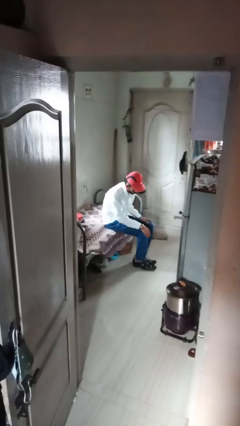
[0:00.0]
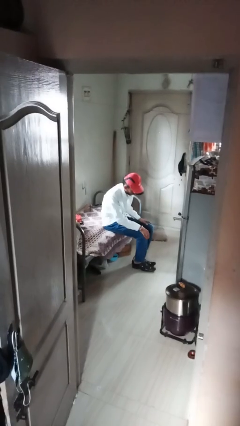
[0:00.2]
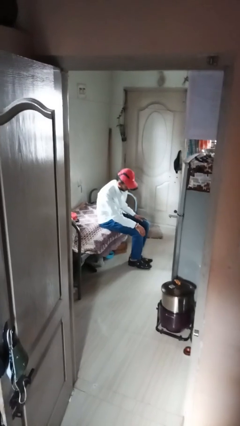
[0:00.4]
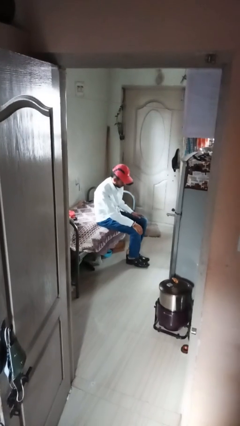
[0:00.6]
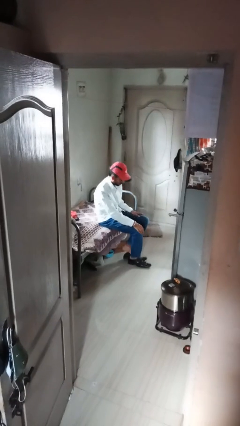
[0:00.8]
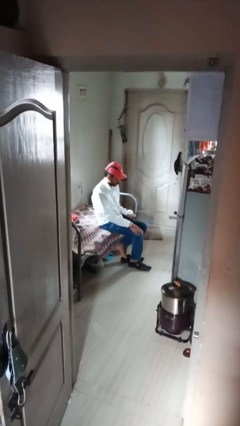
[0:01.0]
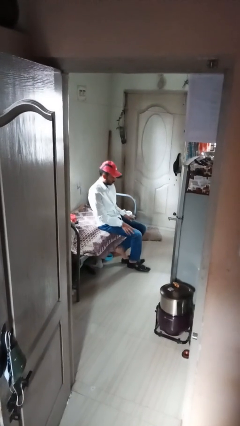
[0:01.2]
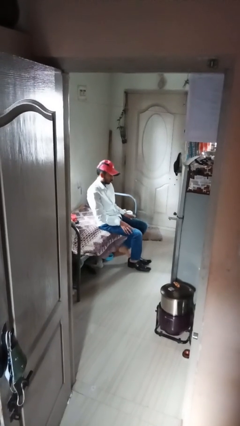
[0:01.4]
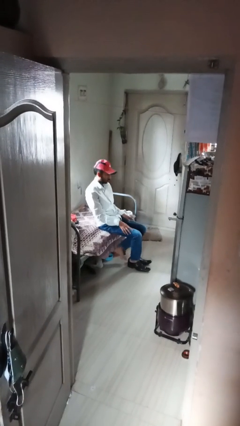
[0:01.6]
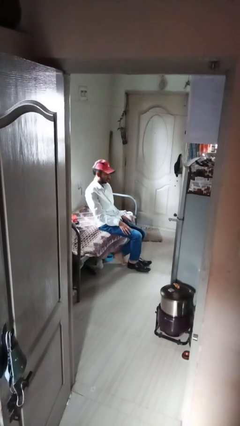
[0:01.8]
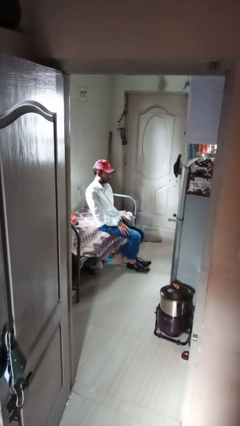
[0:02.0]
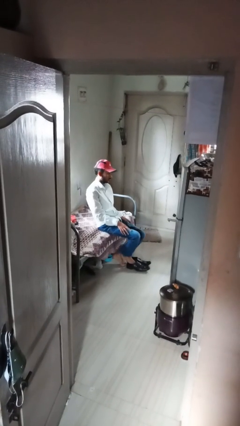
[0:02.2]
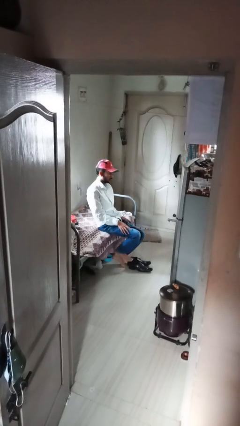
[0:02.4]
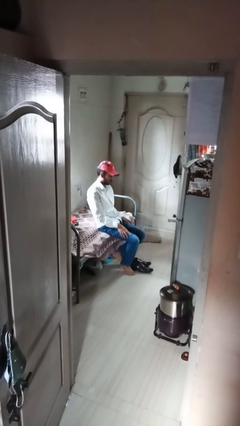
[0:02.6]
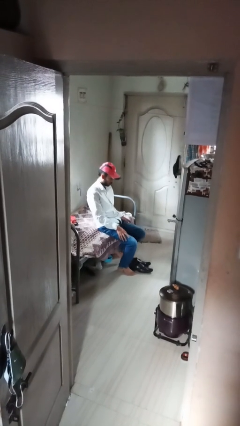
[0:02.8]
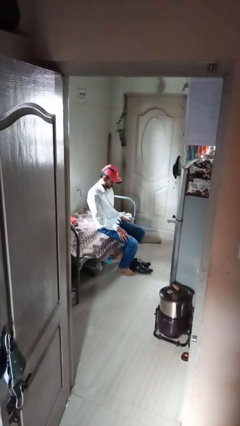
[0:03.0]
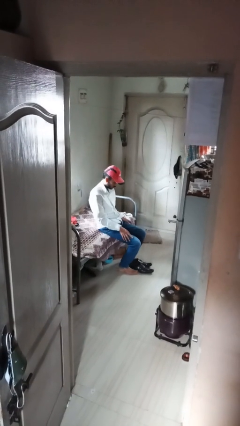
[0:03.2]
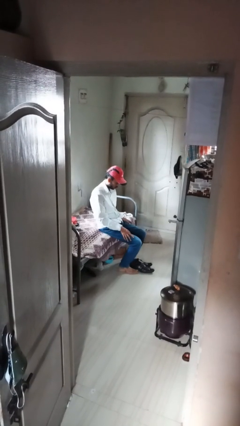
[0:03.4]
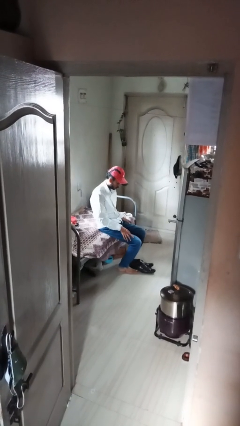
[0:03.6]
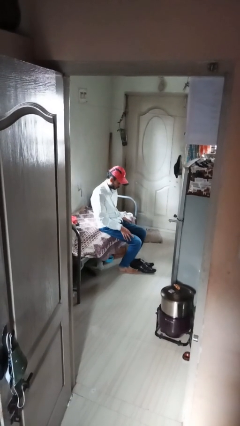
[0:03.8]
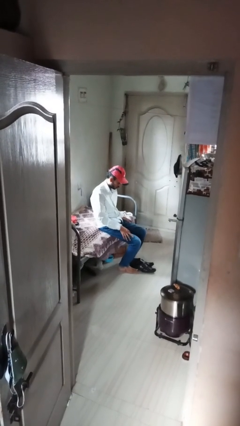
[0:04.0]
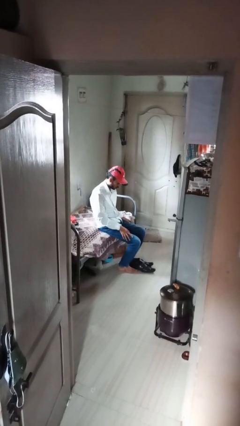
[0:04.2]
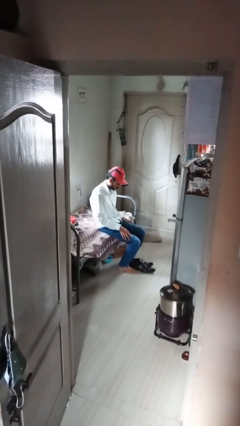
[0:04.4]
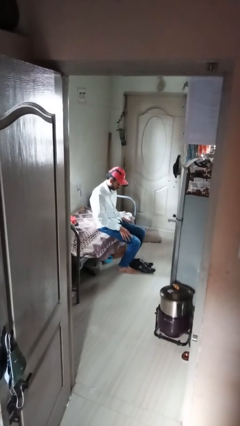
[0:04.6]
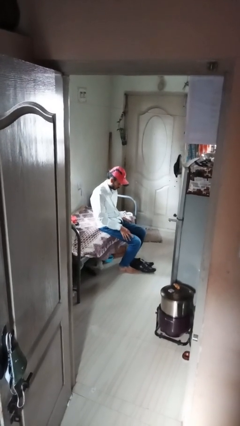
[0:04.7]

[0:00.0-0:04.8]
person takes off shoes

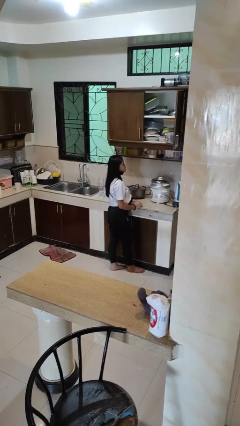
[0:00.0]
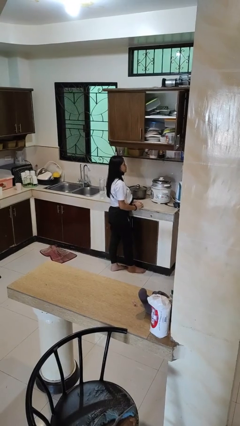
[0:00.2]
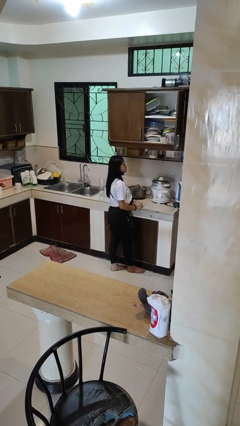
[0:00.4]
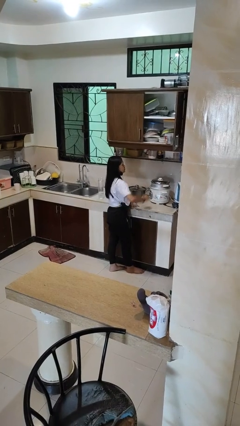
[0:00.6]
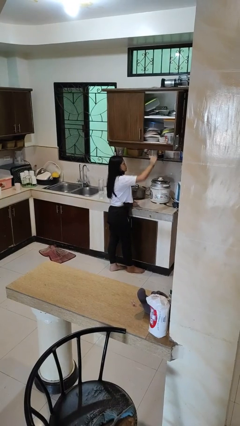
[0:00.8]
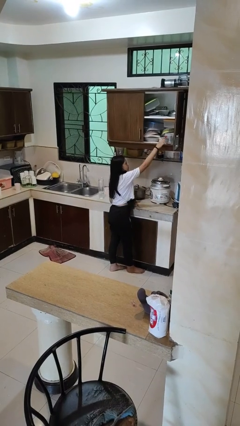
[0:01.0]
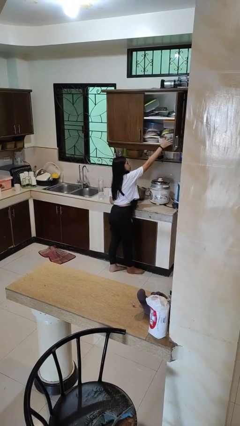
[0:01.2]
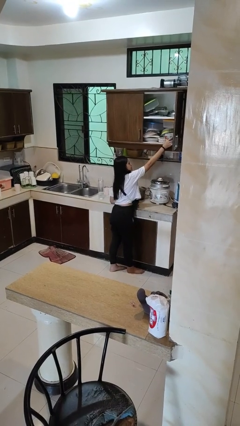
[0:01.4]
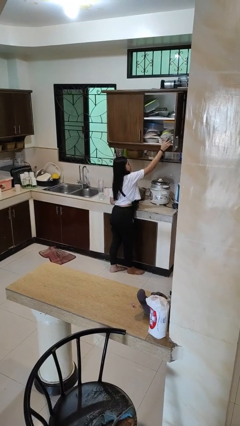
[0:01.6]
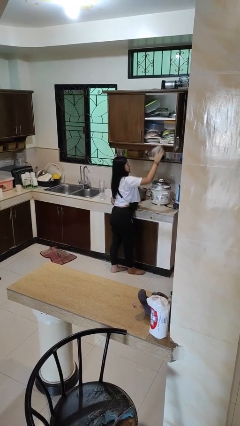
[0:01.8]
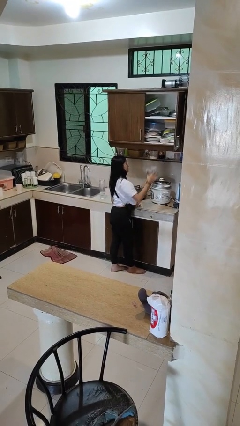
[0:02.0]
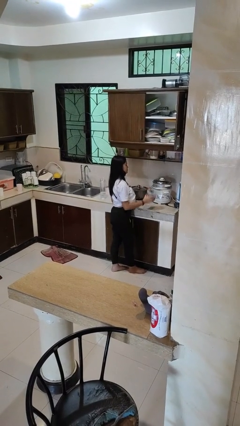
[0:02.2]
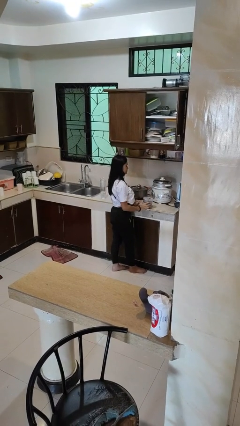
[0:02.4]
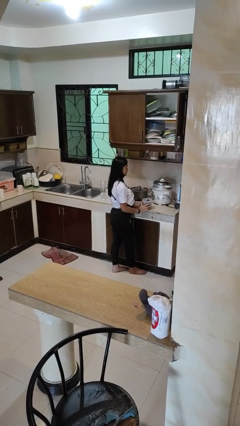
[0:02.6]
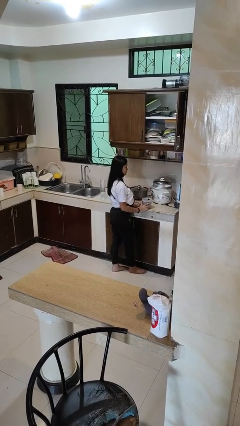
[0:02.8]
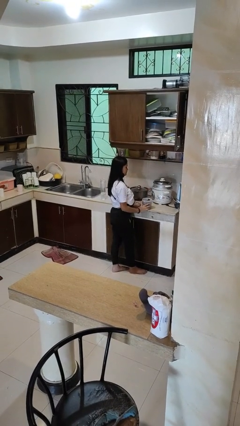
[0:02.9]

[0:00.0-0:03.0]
person picks up object from shelf

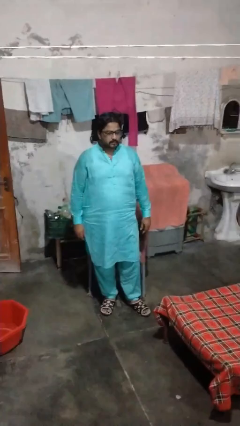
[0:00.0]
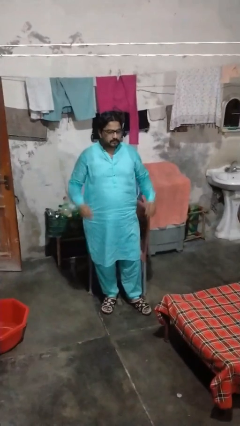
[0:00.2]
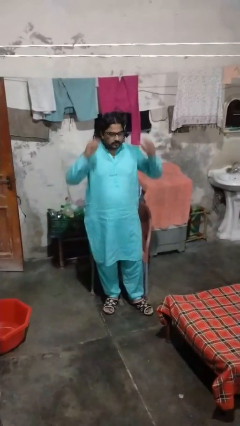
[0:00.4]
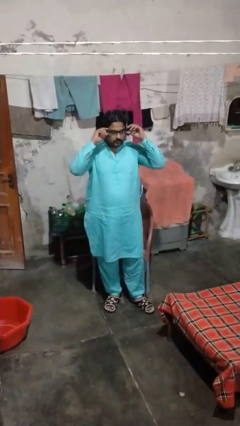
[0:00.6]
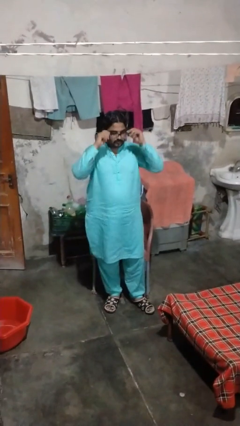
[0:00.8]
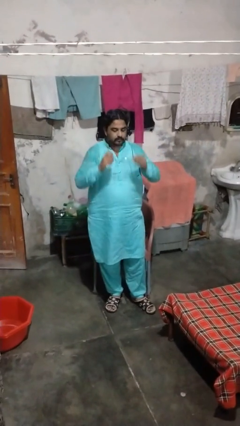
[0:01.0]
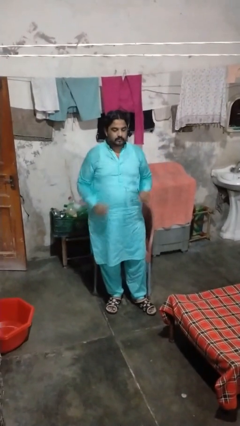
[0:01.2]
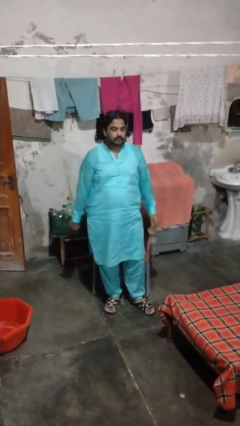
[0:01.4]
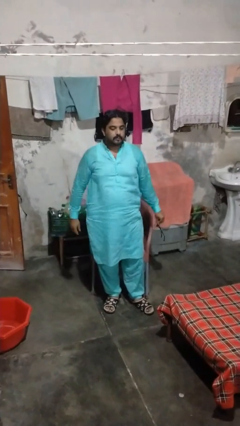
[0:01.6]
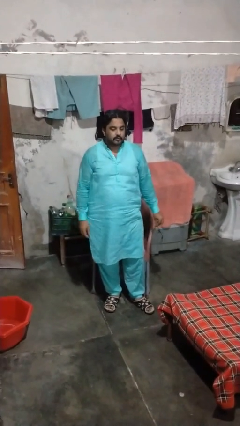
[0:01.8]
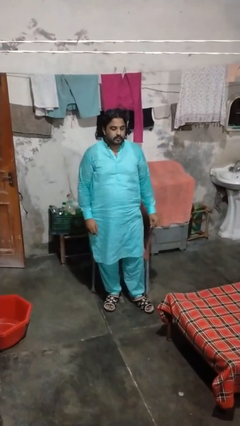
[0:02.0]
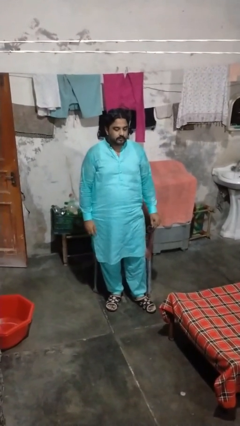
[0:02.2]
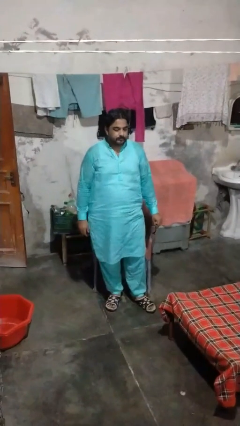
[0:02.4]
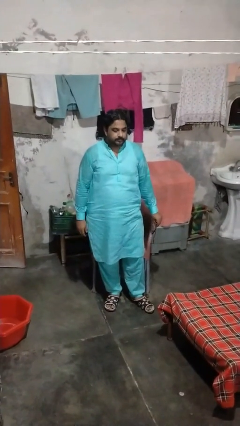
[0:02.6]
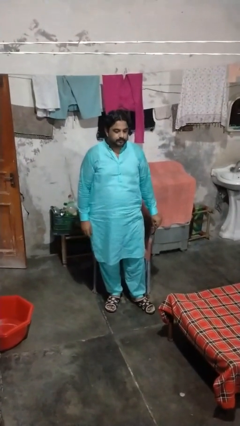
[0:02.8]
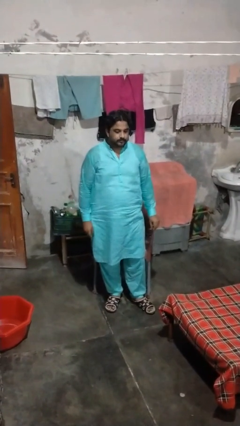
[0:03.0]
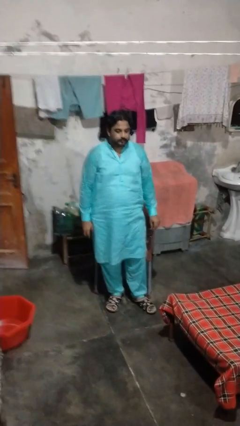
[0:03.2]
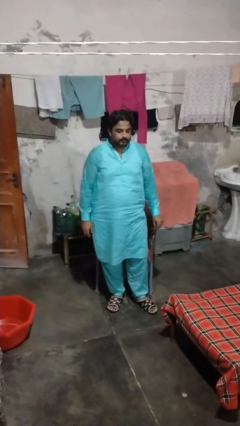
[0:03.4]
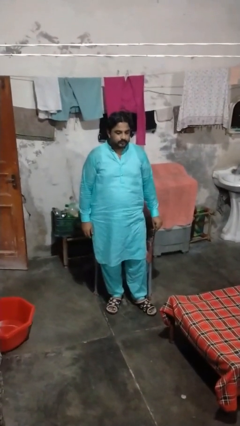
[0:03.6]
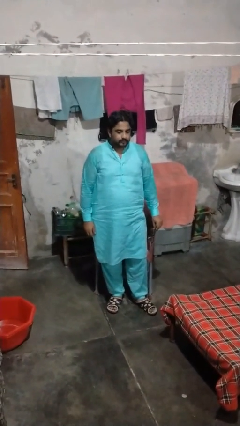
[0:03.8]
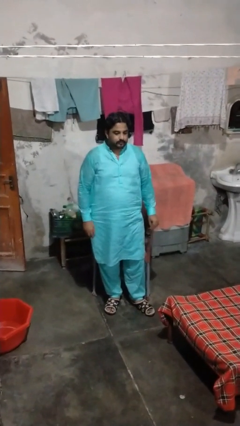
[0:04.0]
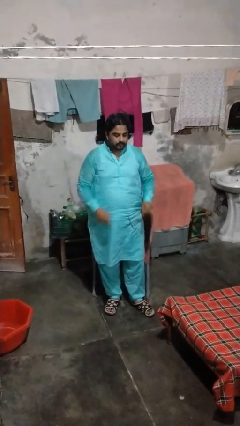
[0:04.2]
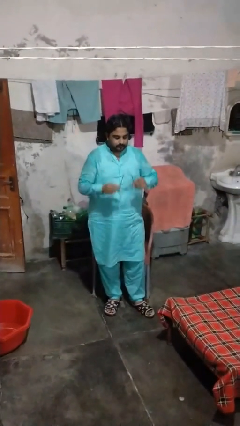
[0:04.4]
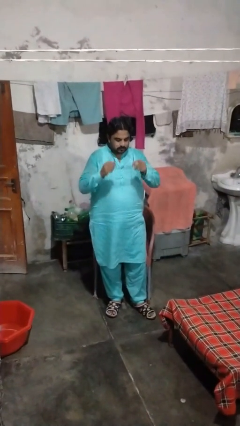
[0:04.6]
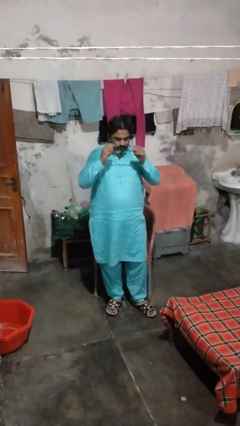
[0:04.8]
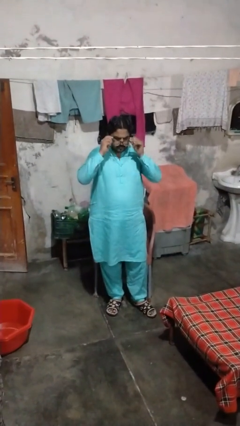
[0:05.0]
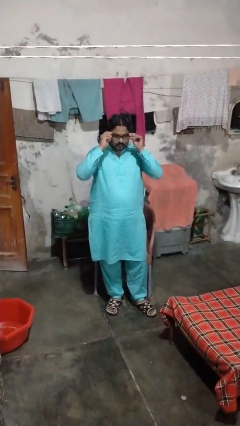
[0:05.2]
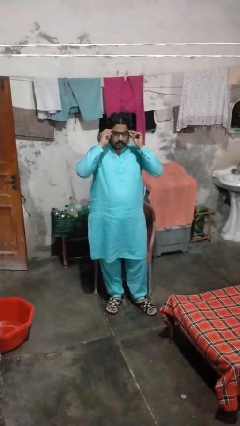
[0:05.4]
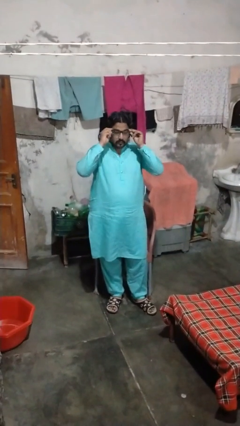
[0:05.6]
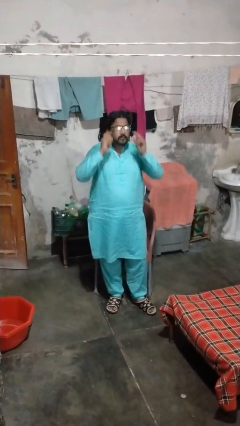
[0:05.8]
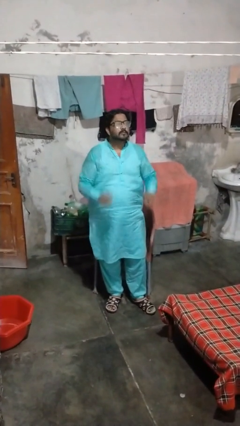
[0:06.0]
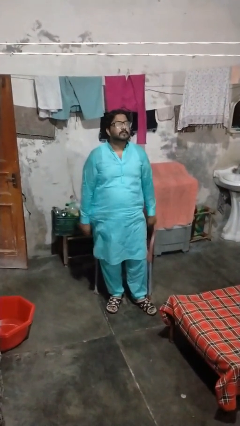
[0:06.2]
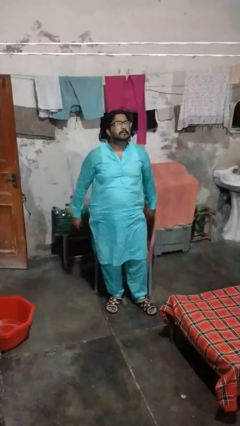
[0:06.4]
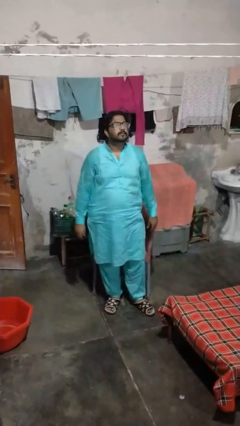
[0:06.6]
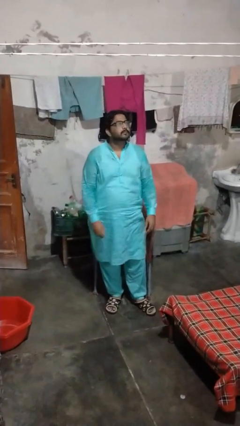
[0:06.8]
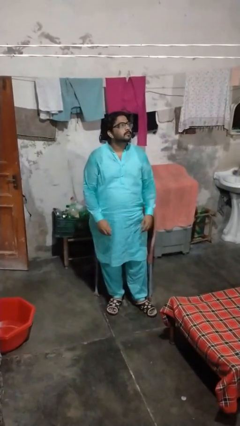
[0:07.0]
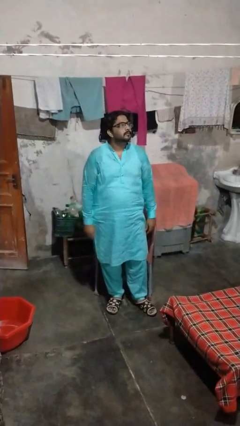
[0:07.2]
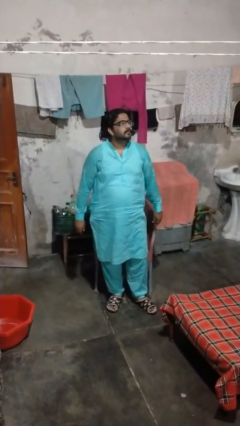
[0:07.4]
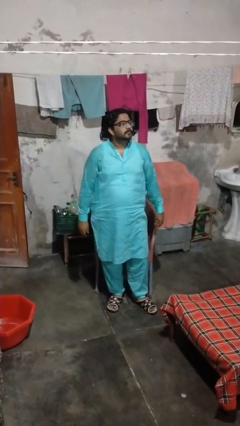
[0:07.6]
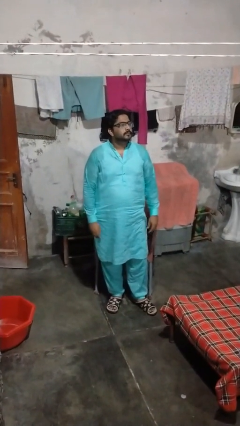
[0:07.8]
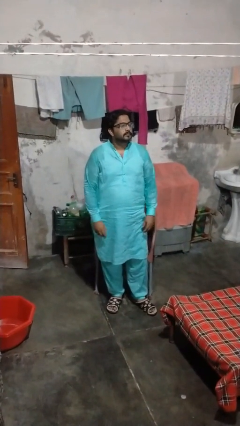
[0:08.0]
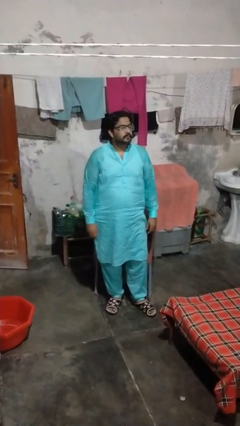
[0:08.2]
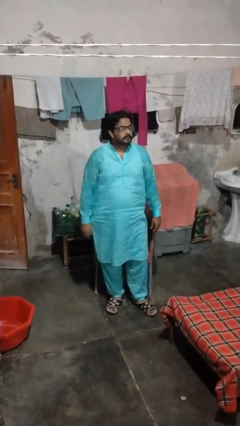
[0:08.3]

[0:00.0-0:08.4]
person puts on glasses

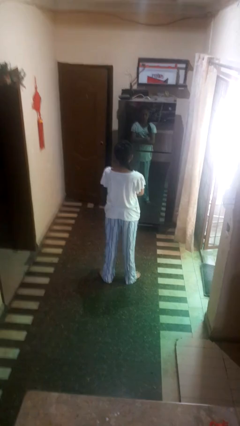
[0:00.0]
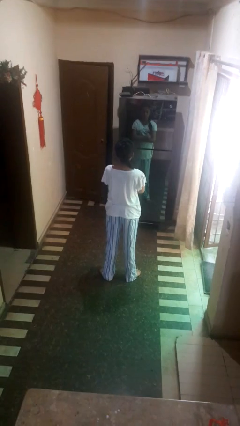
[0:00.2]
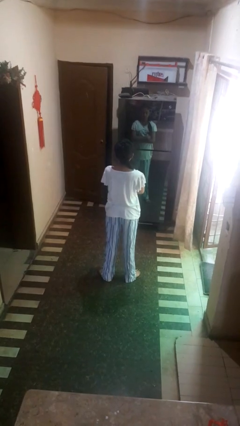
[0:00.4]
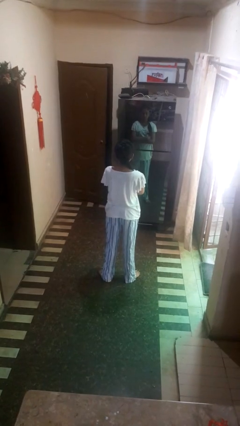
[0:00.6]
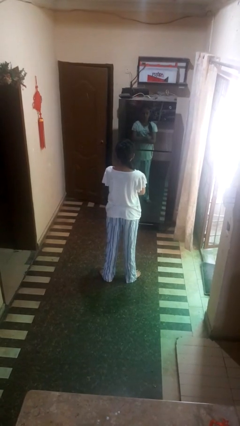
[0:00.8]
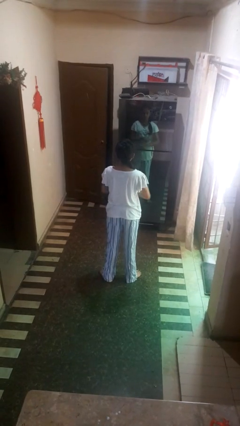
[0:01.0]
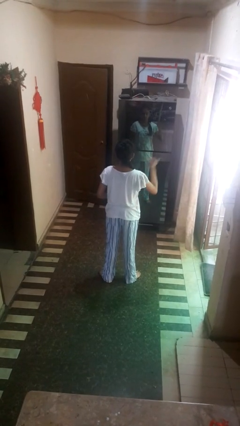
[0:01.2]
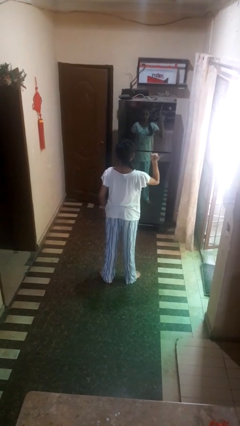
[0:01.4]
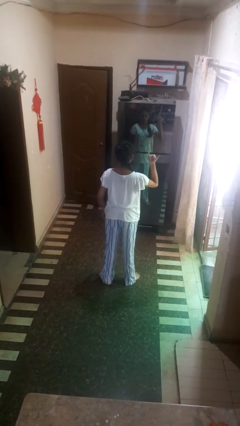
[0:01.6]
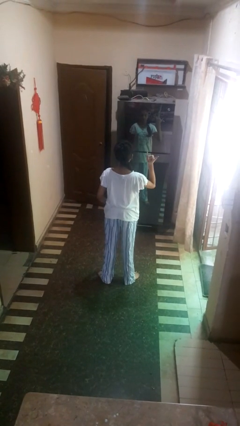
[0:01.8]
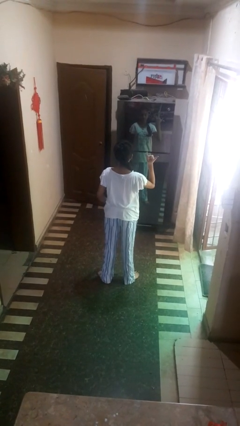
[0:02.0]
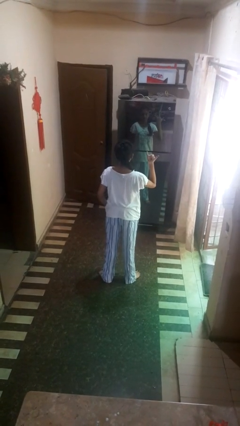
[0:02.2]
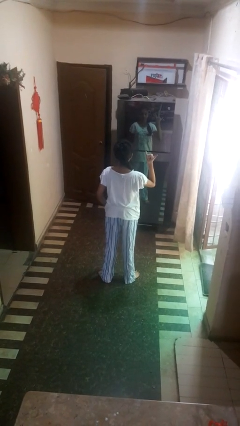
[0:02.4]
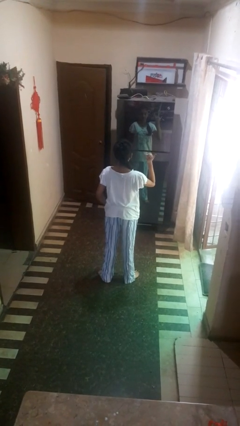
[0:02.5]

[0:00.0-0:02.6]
person gestures hang loose
